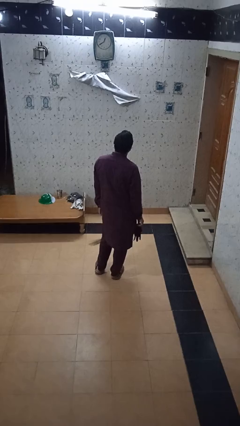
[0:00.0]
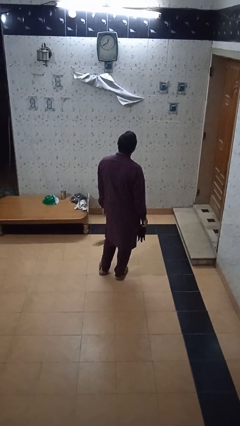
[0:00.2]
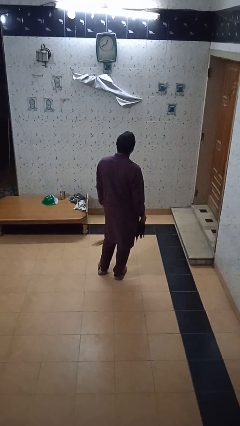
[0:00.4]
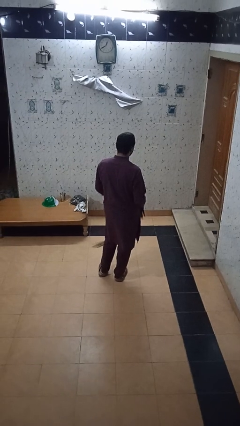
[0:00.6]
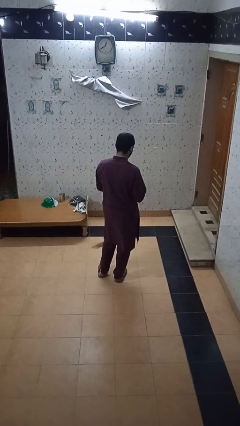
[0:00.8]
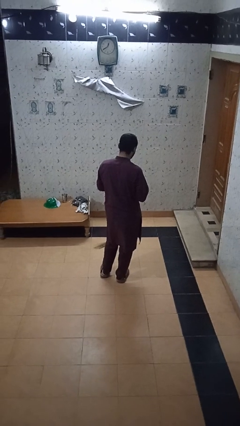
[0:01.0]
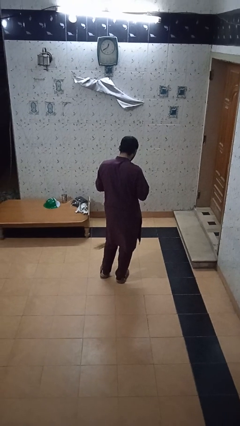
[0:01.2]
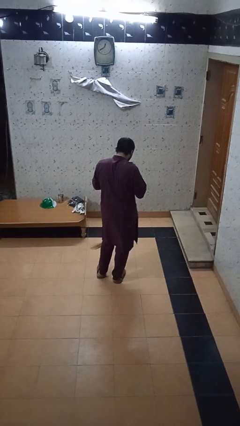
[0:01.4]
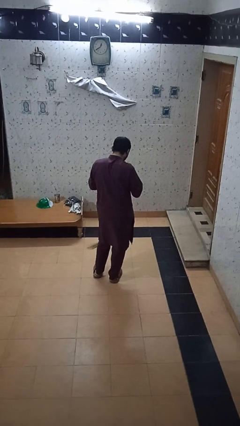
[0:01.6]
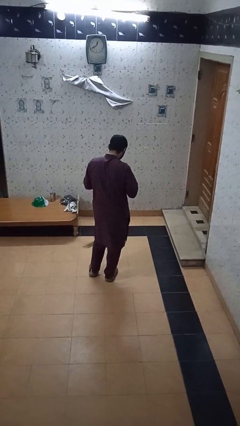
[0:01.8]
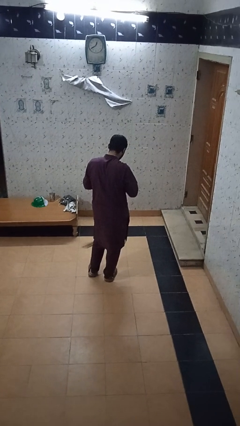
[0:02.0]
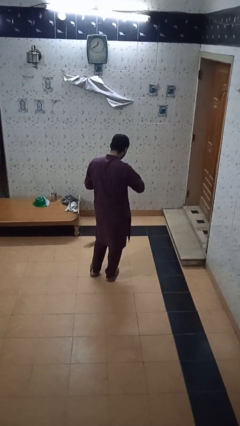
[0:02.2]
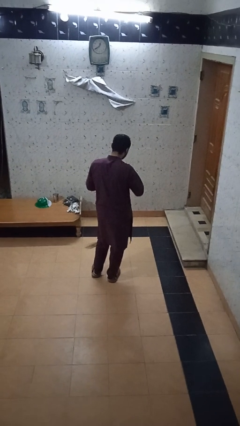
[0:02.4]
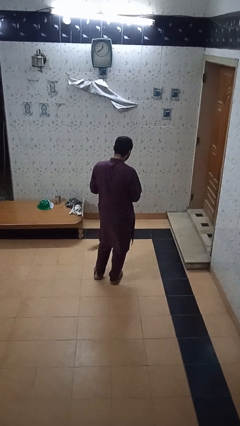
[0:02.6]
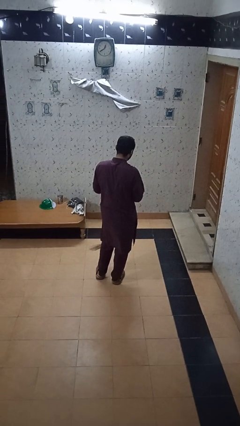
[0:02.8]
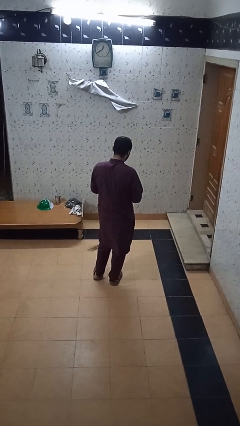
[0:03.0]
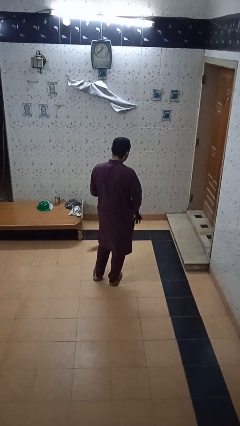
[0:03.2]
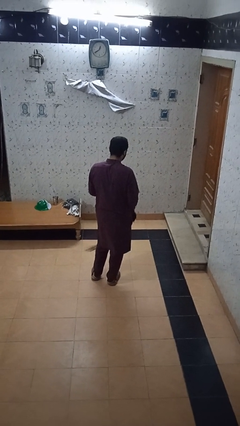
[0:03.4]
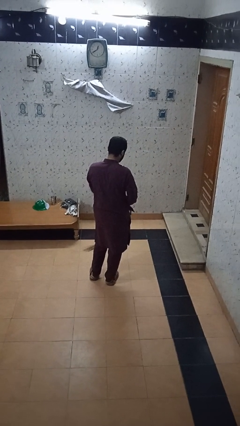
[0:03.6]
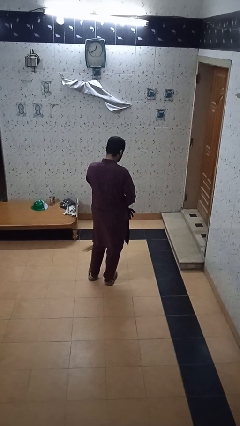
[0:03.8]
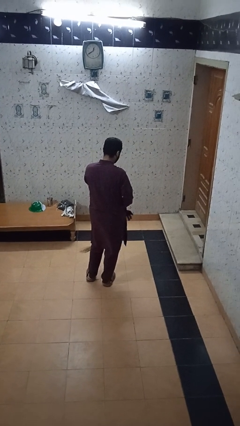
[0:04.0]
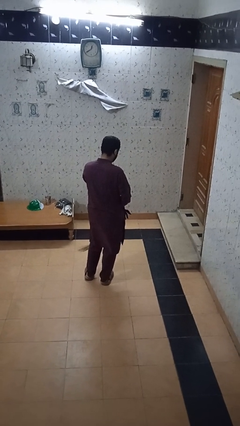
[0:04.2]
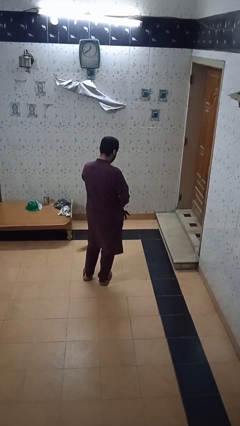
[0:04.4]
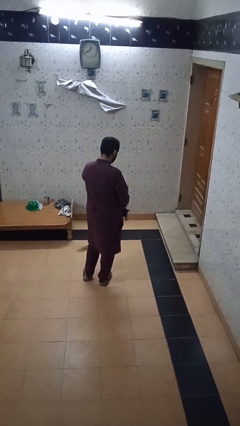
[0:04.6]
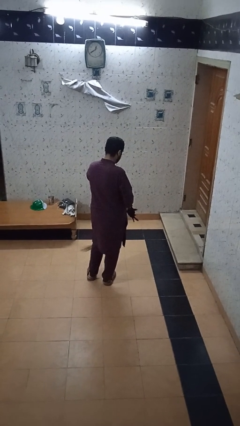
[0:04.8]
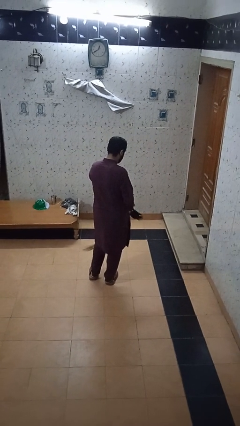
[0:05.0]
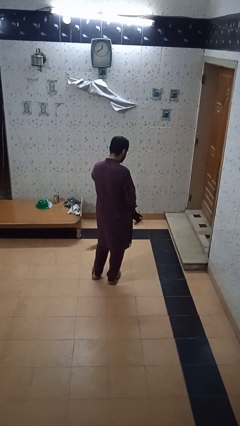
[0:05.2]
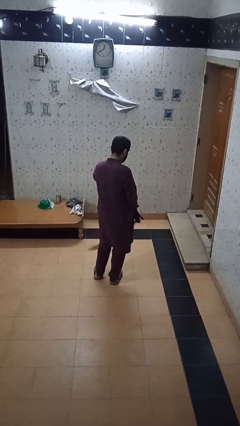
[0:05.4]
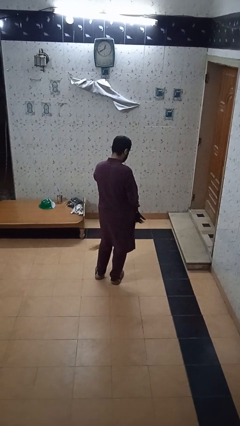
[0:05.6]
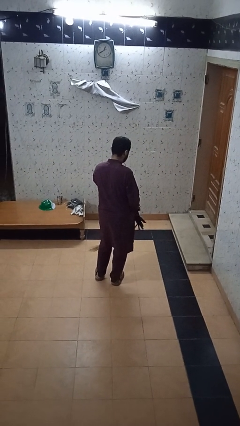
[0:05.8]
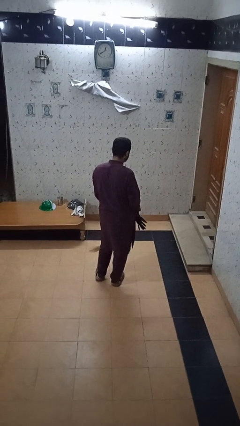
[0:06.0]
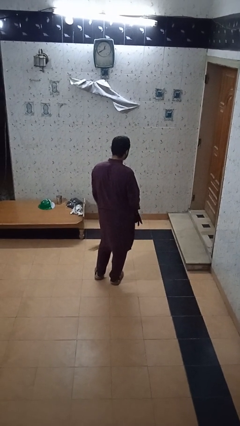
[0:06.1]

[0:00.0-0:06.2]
person puts on gloves

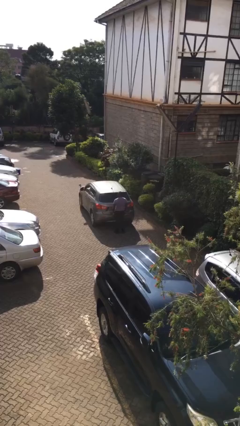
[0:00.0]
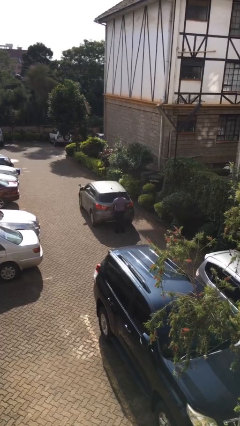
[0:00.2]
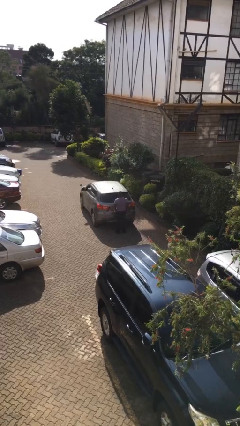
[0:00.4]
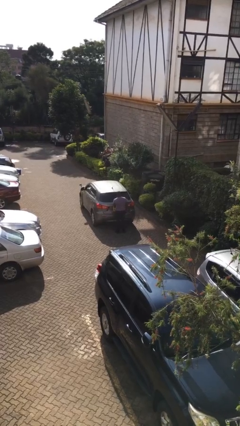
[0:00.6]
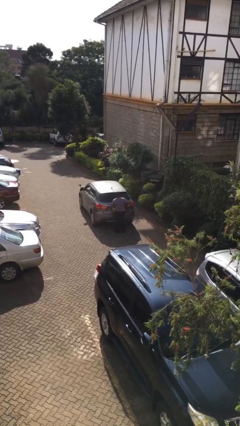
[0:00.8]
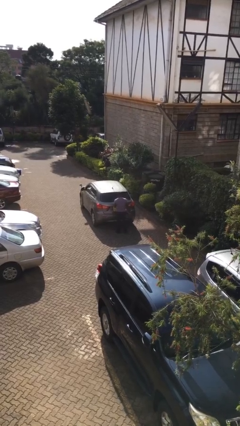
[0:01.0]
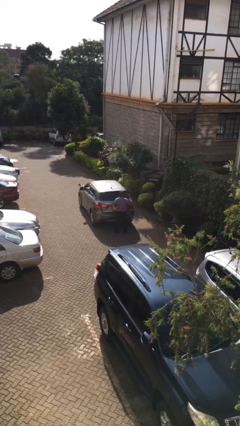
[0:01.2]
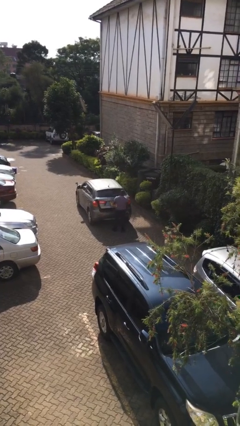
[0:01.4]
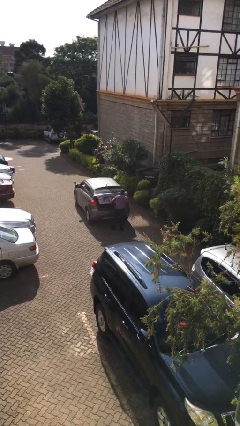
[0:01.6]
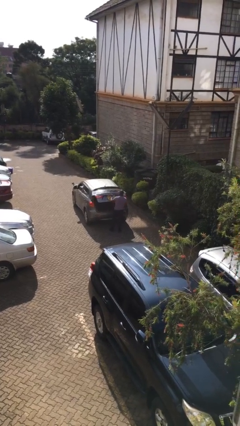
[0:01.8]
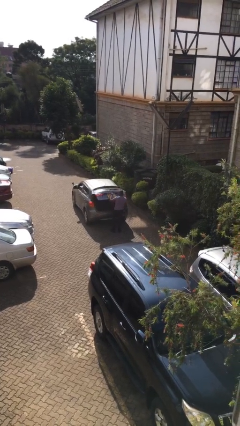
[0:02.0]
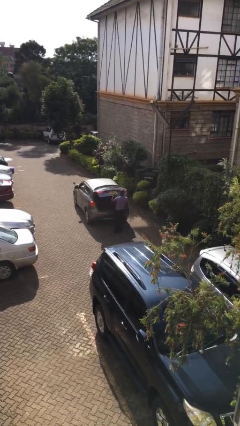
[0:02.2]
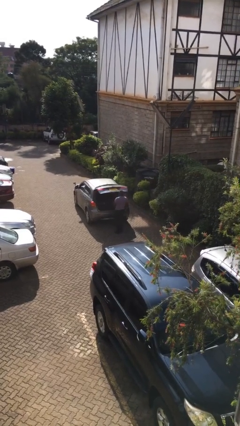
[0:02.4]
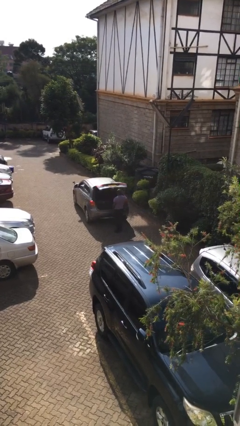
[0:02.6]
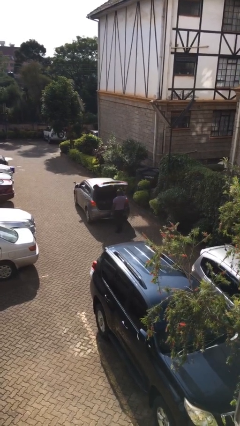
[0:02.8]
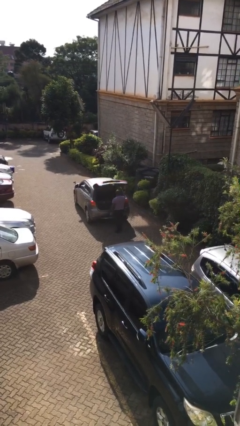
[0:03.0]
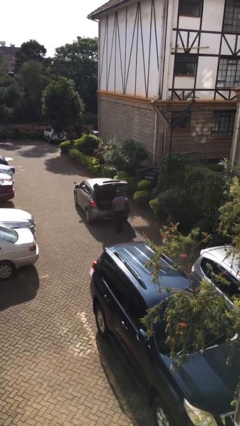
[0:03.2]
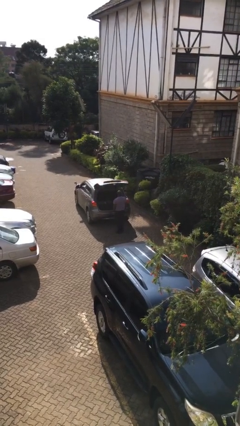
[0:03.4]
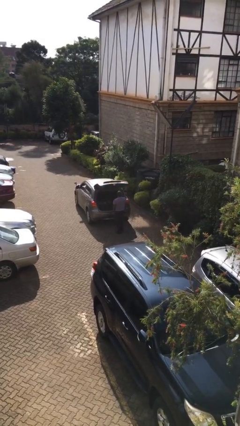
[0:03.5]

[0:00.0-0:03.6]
person opens car trunk

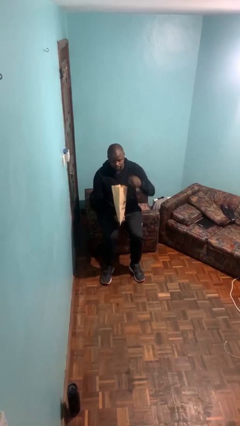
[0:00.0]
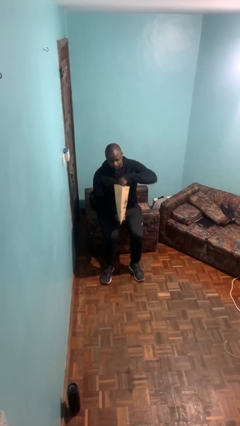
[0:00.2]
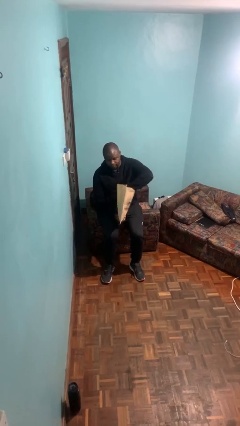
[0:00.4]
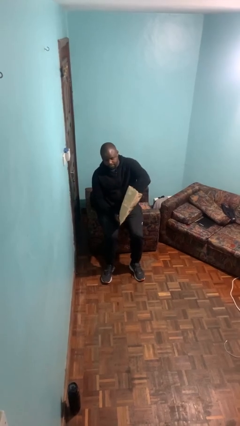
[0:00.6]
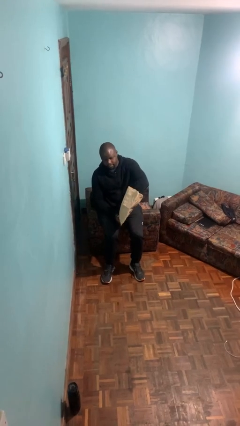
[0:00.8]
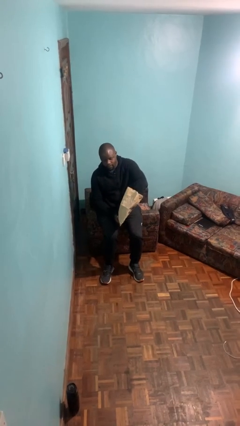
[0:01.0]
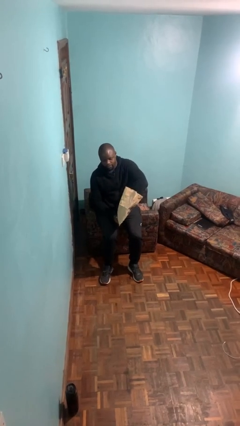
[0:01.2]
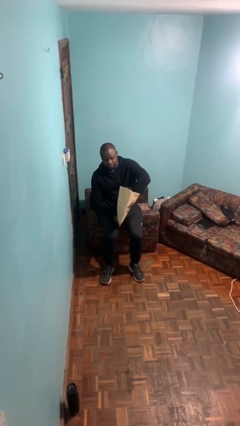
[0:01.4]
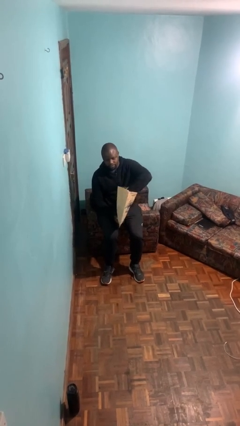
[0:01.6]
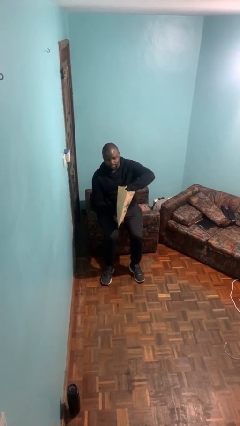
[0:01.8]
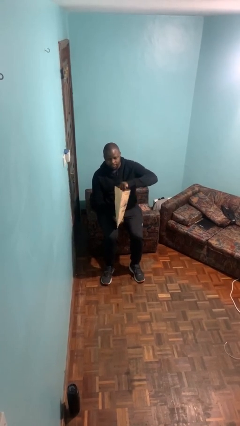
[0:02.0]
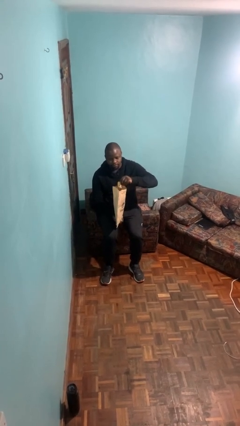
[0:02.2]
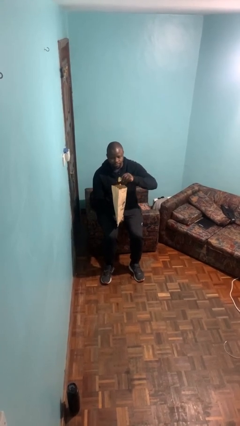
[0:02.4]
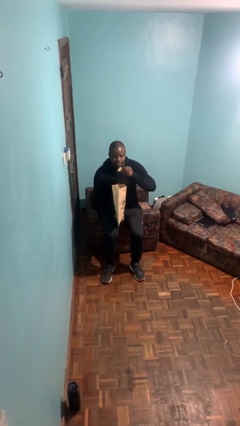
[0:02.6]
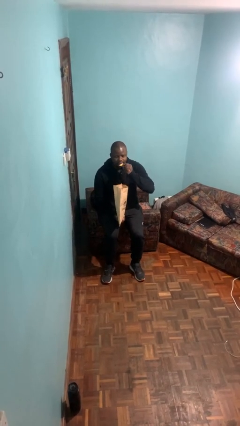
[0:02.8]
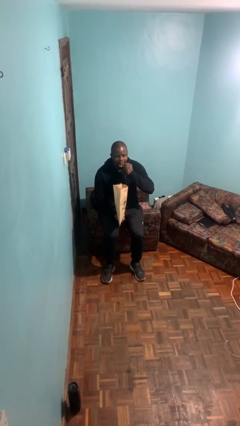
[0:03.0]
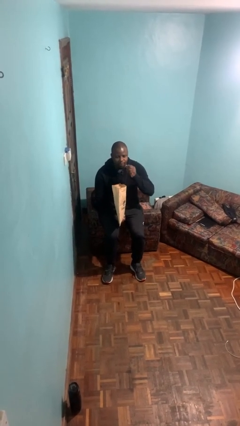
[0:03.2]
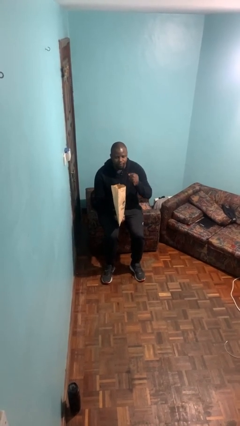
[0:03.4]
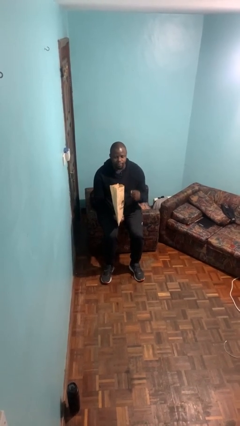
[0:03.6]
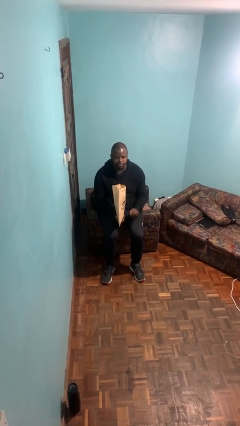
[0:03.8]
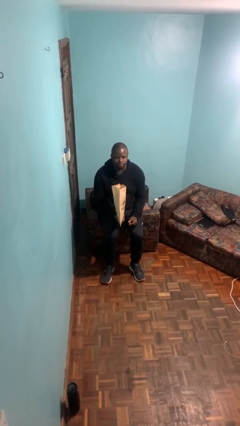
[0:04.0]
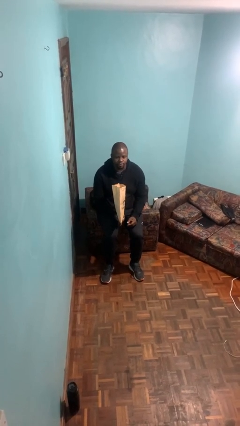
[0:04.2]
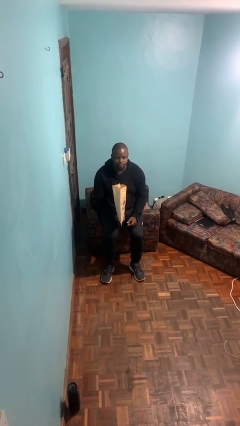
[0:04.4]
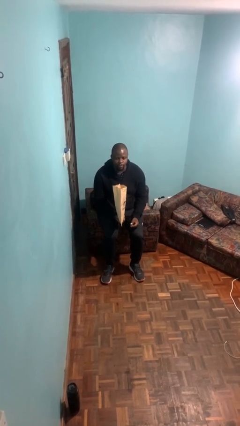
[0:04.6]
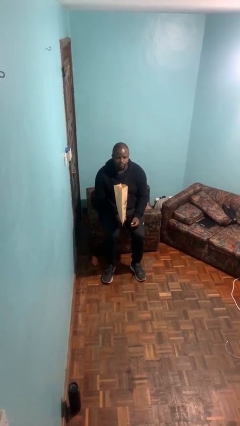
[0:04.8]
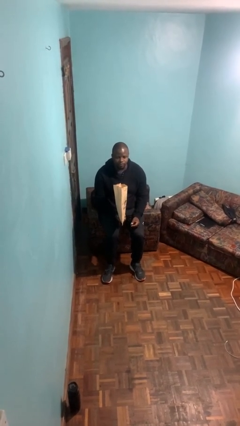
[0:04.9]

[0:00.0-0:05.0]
person eats snack from bag

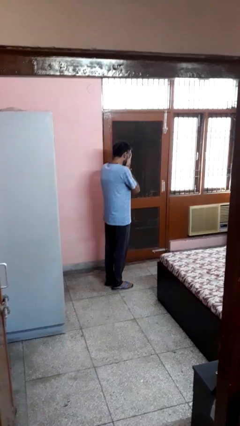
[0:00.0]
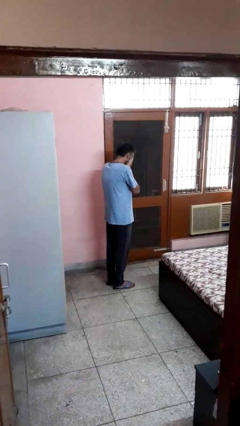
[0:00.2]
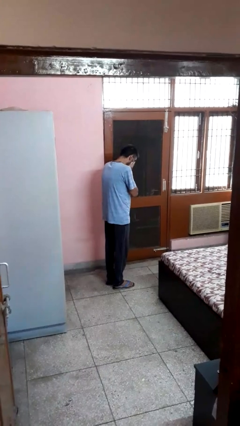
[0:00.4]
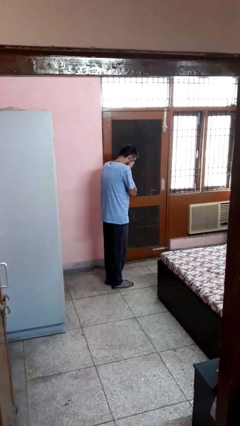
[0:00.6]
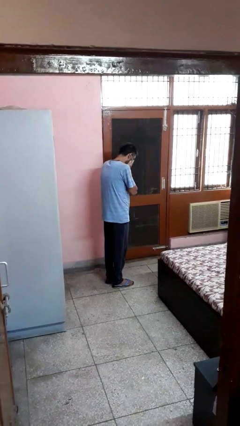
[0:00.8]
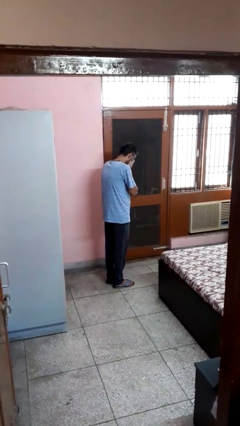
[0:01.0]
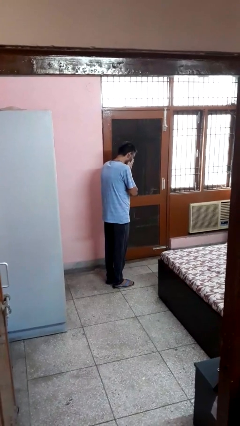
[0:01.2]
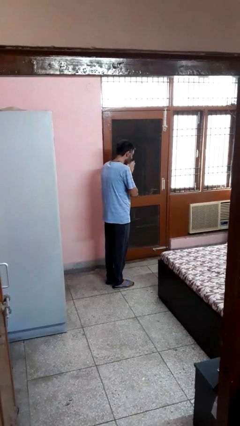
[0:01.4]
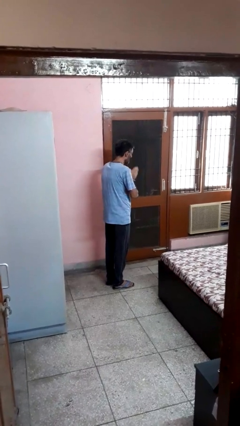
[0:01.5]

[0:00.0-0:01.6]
person sneezes into hand

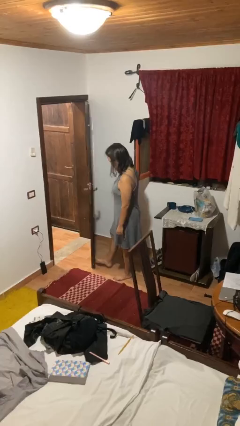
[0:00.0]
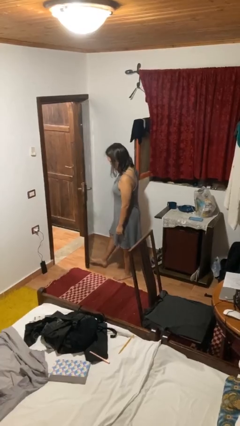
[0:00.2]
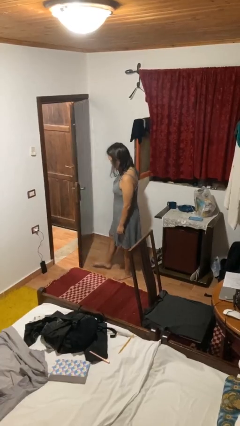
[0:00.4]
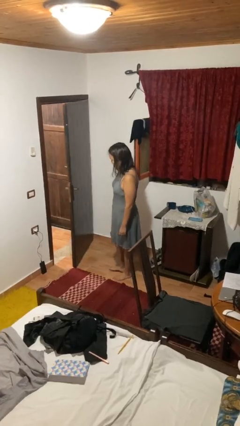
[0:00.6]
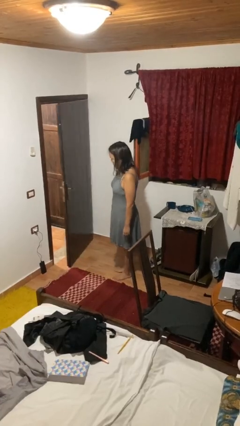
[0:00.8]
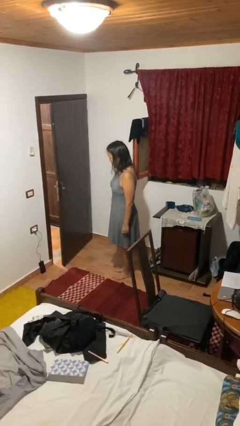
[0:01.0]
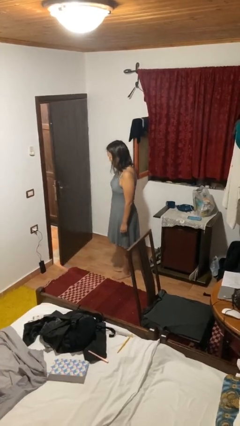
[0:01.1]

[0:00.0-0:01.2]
person closes door with foot
